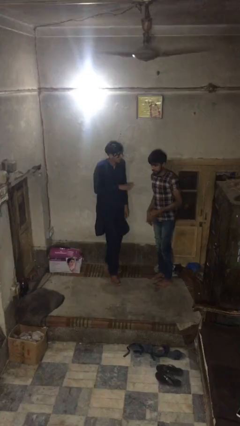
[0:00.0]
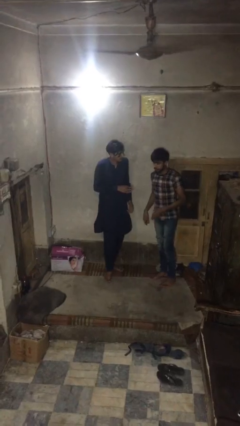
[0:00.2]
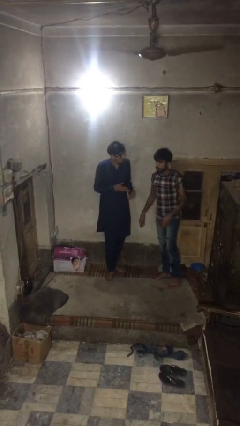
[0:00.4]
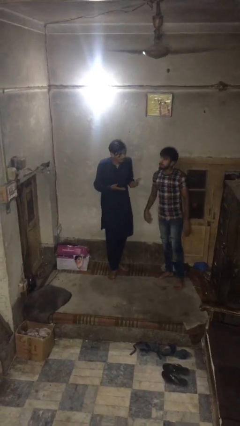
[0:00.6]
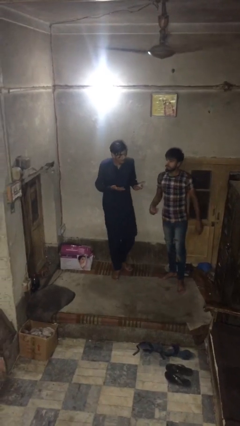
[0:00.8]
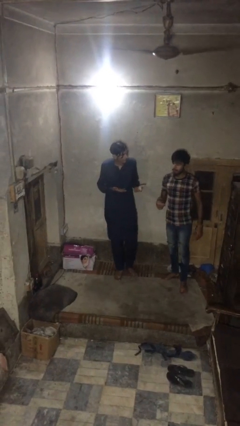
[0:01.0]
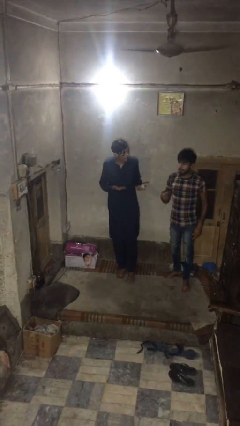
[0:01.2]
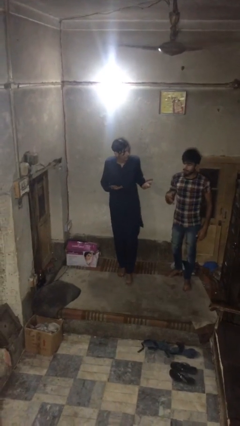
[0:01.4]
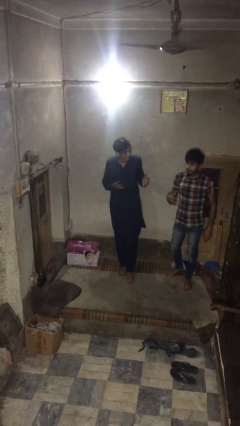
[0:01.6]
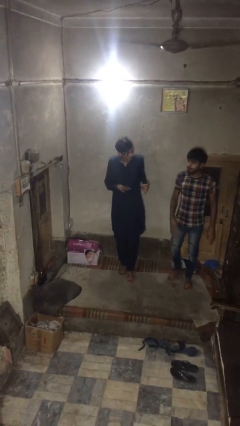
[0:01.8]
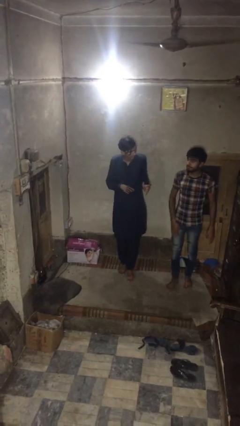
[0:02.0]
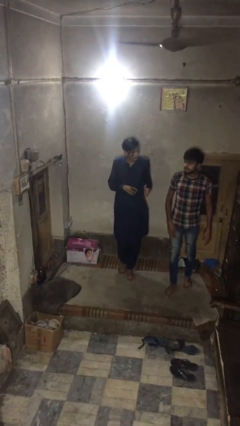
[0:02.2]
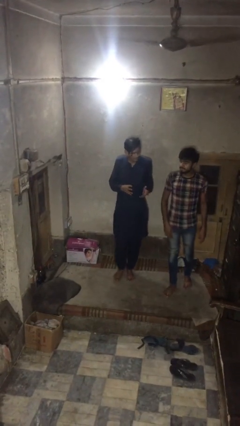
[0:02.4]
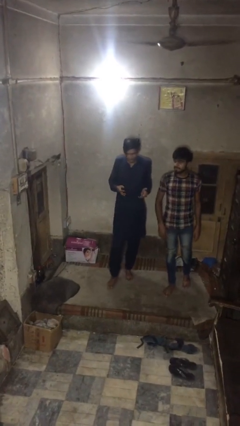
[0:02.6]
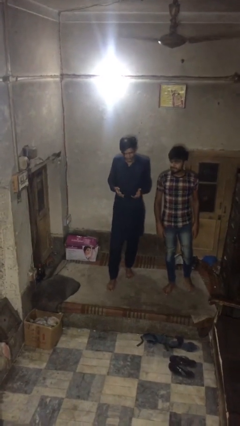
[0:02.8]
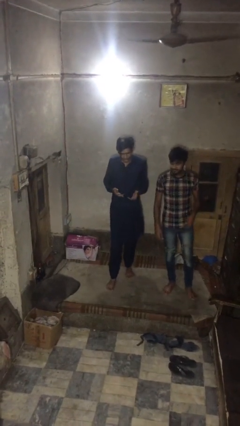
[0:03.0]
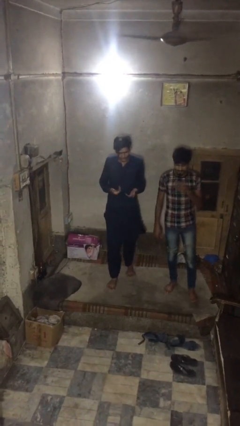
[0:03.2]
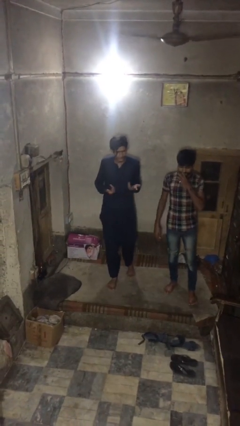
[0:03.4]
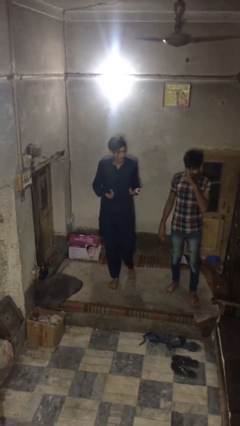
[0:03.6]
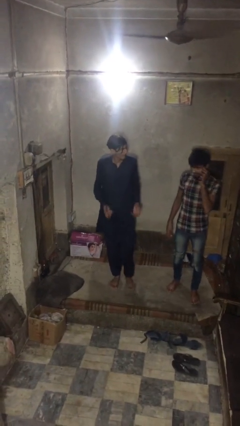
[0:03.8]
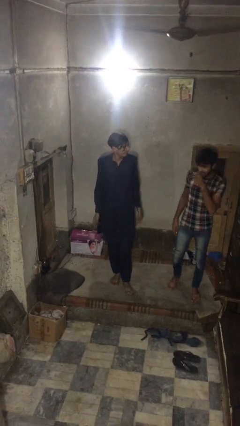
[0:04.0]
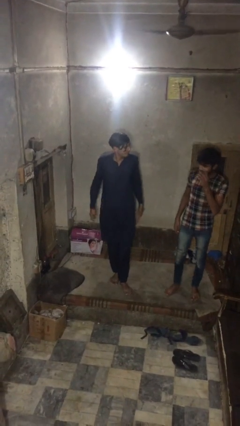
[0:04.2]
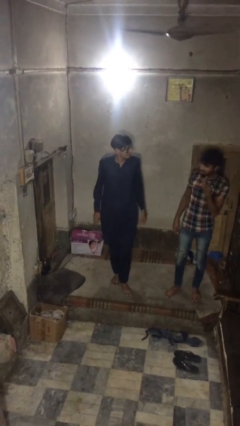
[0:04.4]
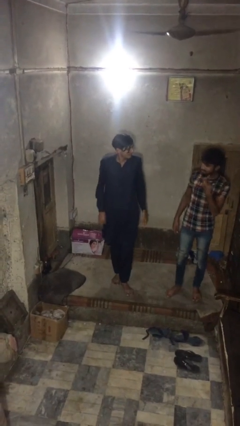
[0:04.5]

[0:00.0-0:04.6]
person talks to person

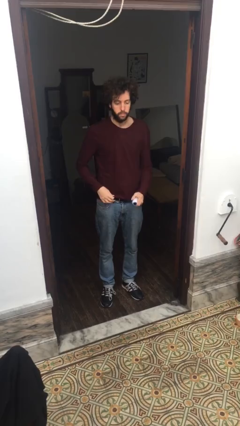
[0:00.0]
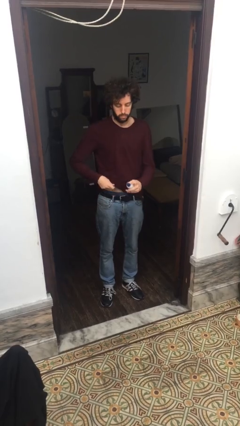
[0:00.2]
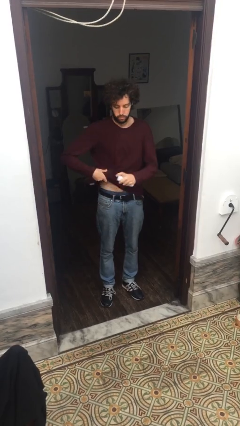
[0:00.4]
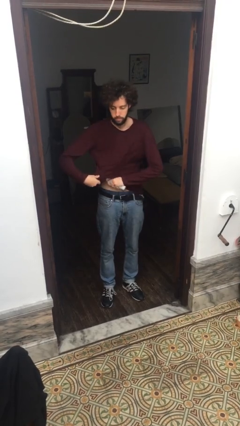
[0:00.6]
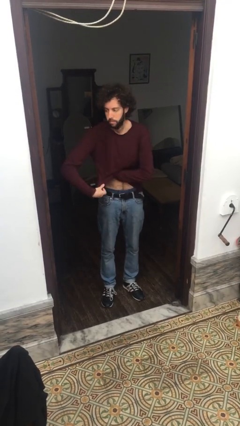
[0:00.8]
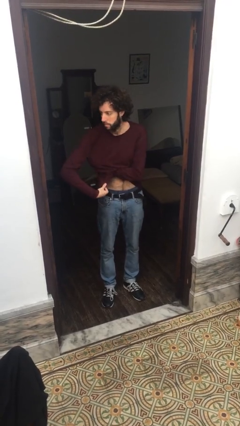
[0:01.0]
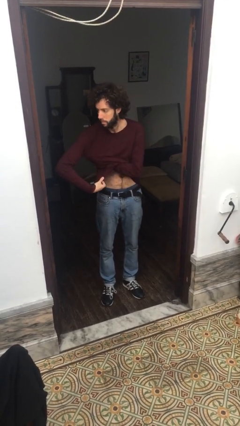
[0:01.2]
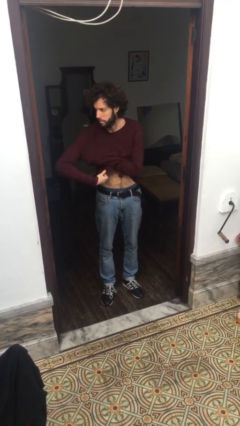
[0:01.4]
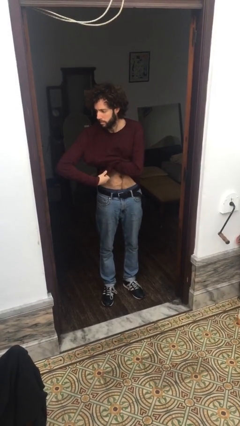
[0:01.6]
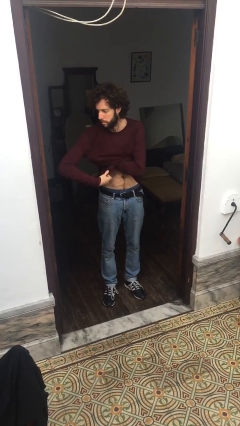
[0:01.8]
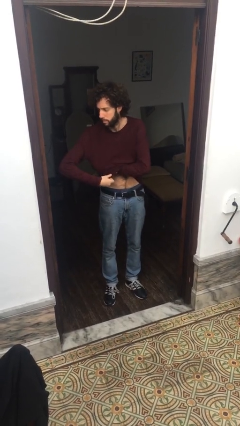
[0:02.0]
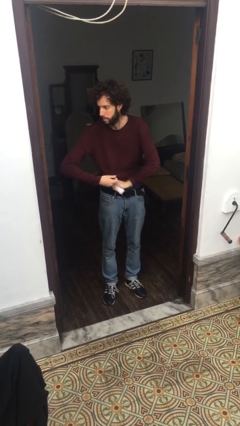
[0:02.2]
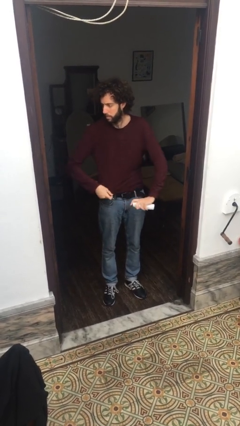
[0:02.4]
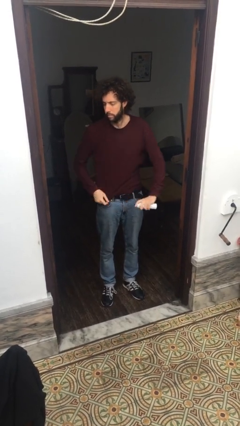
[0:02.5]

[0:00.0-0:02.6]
person applies deodorant

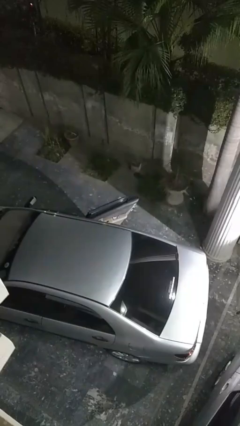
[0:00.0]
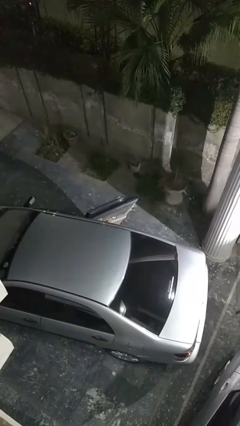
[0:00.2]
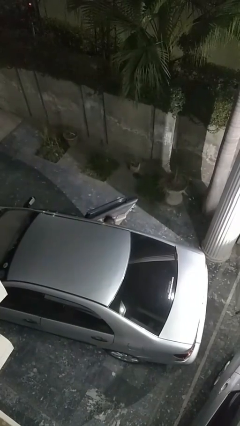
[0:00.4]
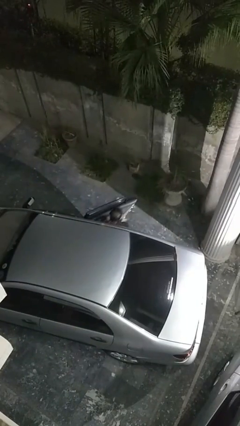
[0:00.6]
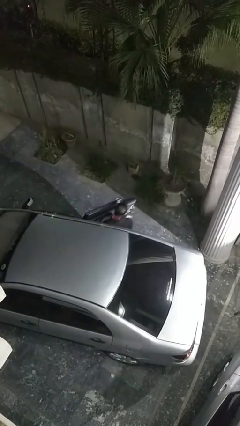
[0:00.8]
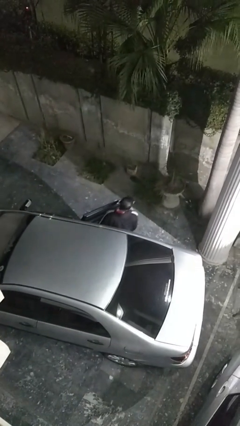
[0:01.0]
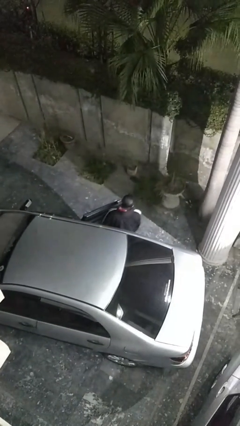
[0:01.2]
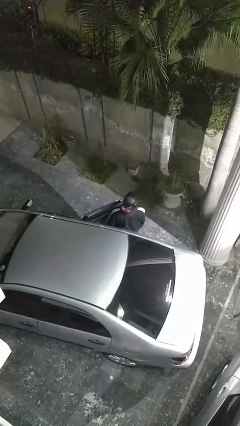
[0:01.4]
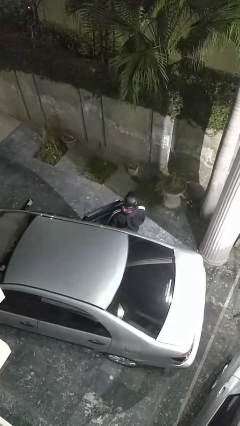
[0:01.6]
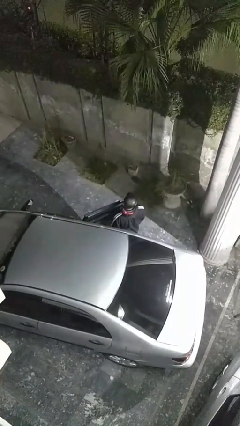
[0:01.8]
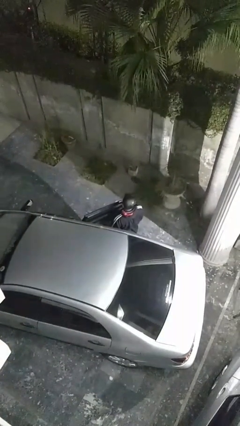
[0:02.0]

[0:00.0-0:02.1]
person exits car

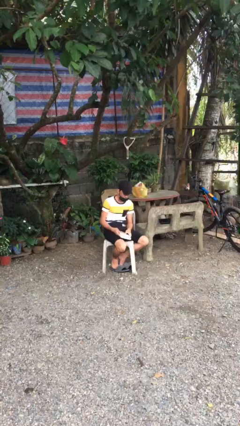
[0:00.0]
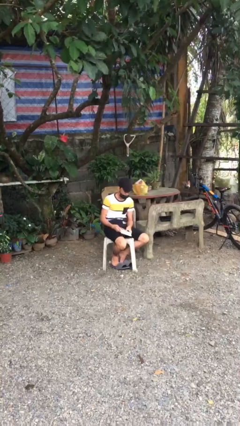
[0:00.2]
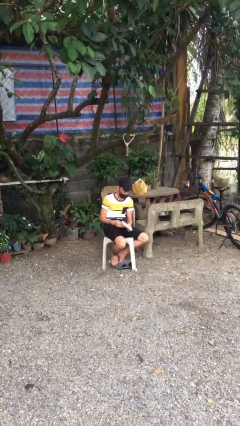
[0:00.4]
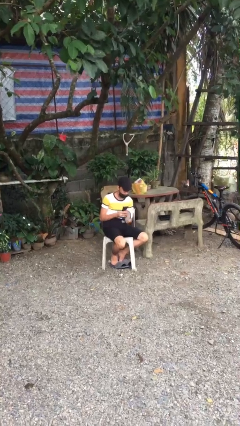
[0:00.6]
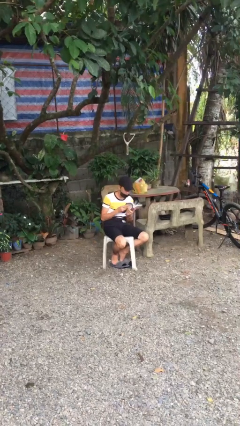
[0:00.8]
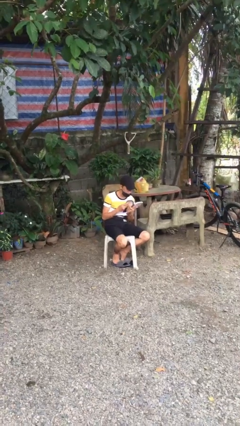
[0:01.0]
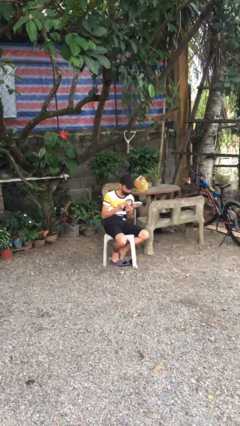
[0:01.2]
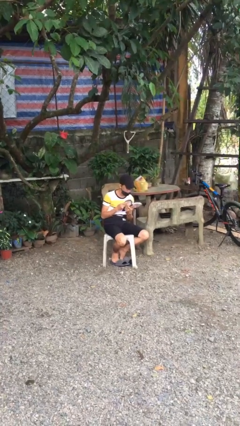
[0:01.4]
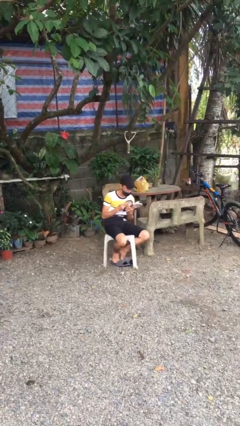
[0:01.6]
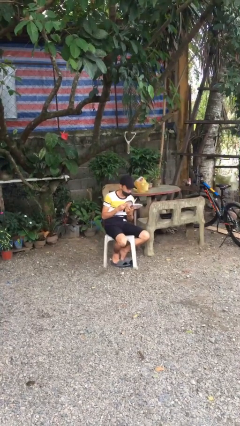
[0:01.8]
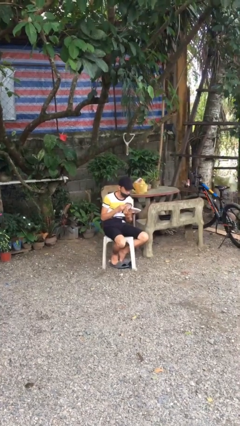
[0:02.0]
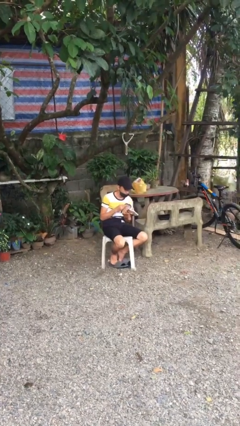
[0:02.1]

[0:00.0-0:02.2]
person reads document

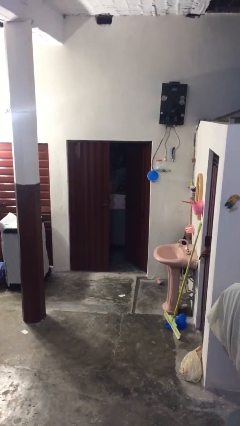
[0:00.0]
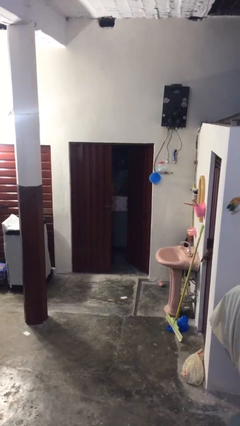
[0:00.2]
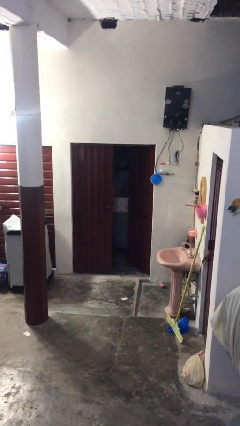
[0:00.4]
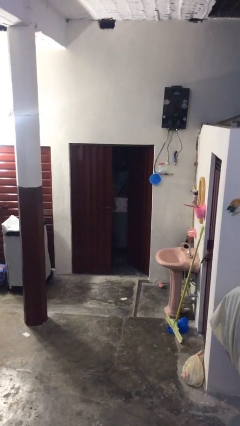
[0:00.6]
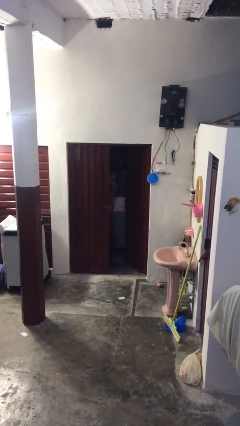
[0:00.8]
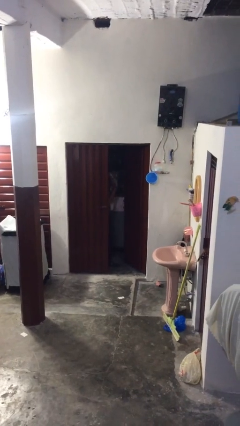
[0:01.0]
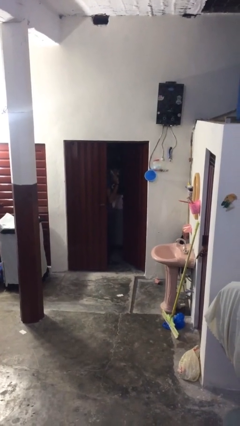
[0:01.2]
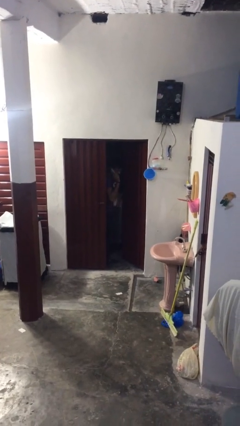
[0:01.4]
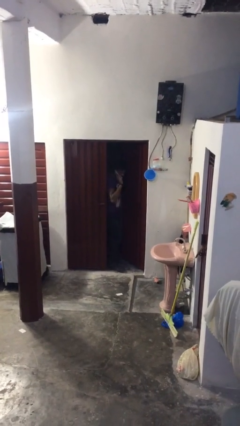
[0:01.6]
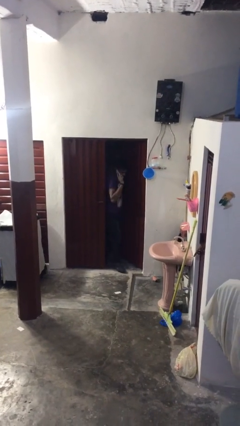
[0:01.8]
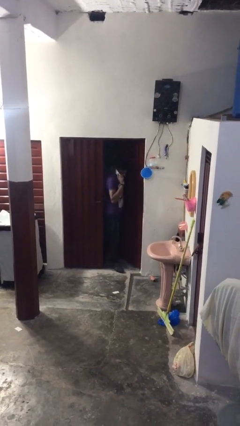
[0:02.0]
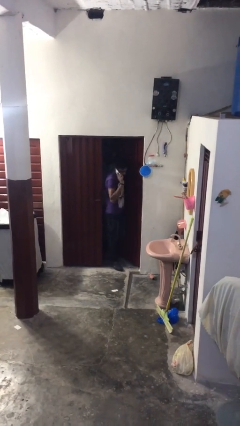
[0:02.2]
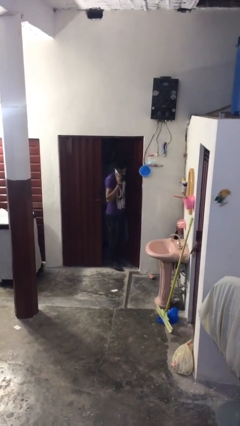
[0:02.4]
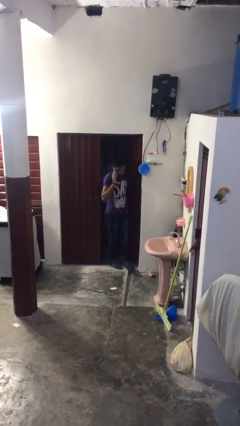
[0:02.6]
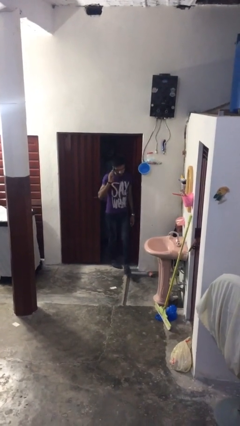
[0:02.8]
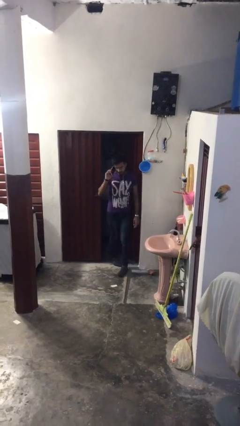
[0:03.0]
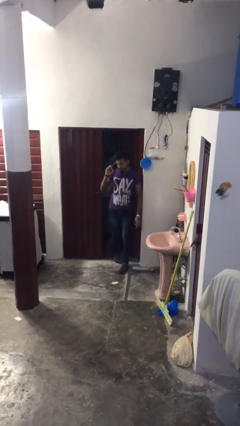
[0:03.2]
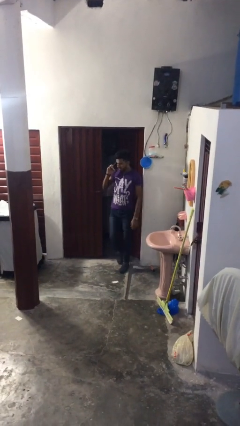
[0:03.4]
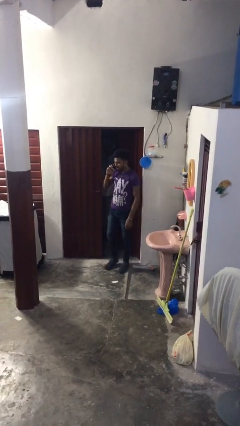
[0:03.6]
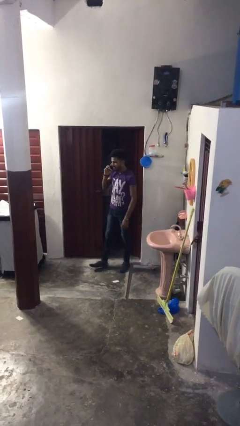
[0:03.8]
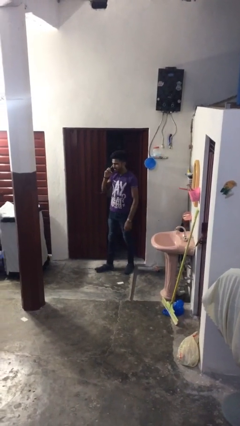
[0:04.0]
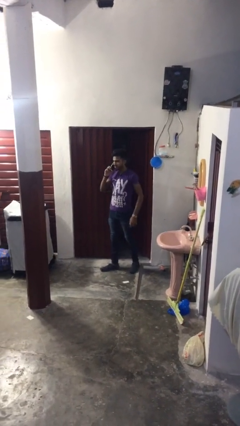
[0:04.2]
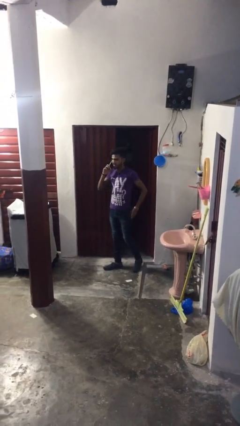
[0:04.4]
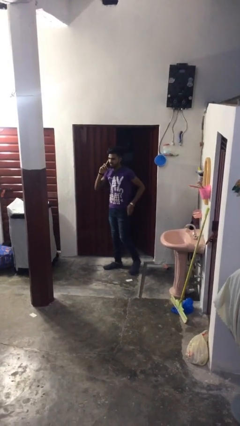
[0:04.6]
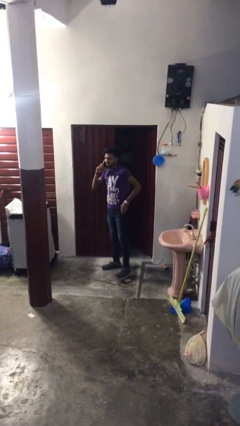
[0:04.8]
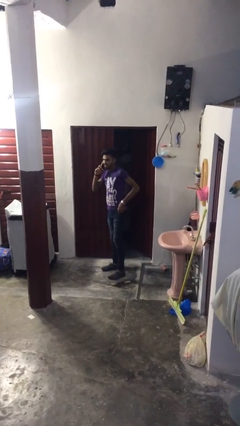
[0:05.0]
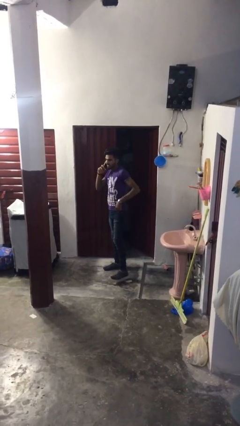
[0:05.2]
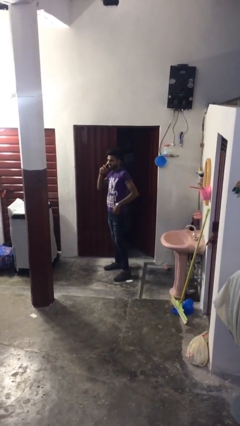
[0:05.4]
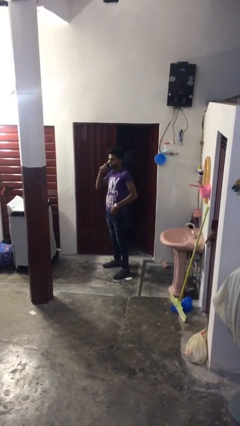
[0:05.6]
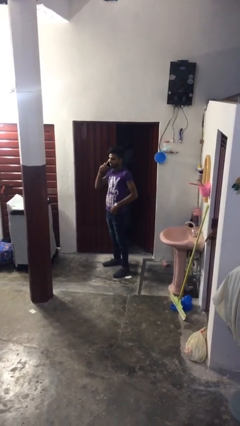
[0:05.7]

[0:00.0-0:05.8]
person enters scene through structure

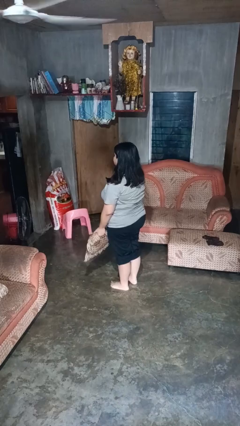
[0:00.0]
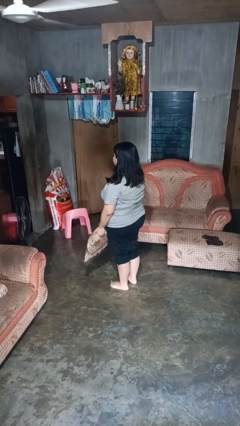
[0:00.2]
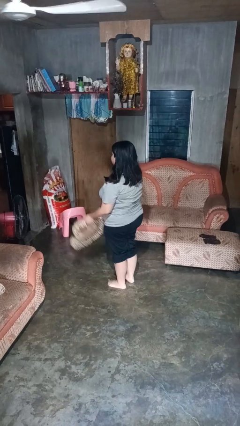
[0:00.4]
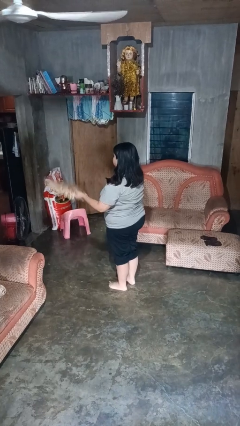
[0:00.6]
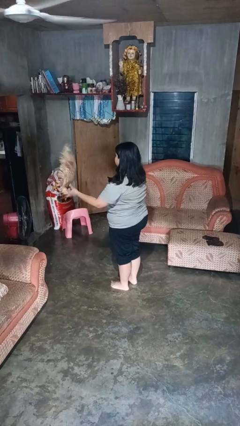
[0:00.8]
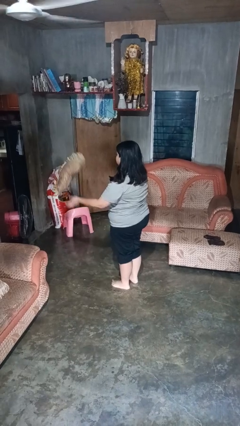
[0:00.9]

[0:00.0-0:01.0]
person throws object into air
